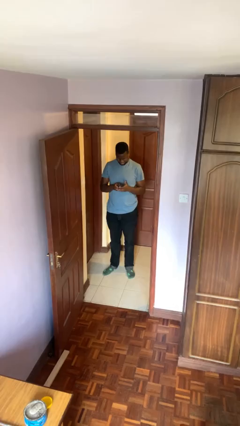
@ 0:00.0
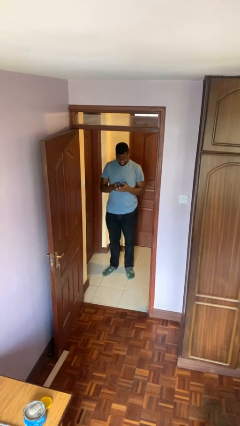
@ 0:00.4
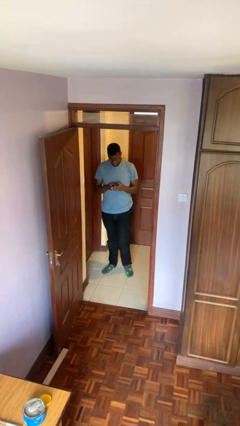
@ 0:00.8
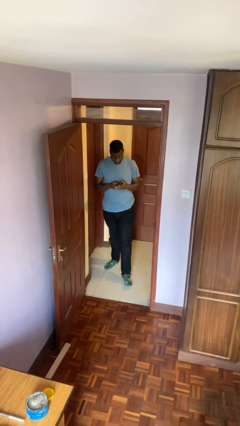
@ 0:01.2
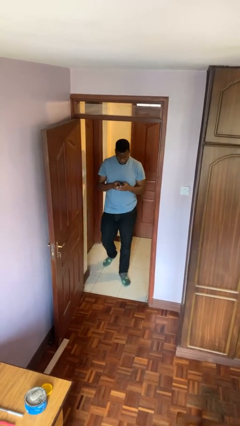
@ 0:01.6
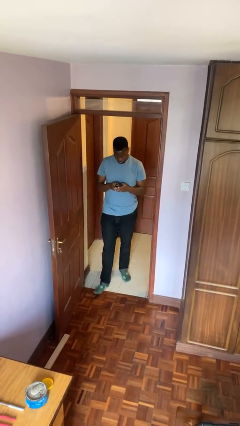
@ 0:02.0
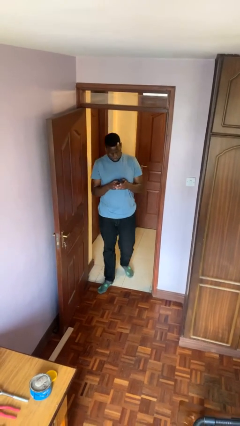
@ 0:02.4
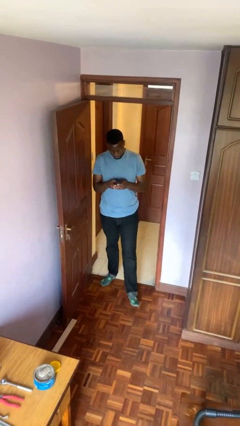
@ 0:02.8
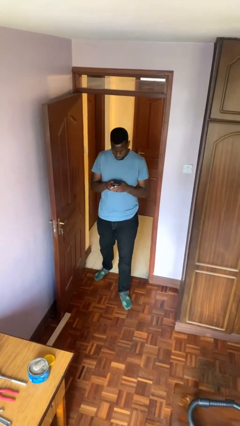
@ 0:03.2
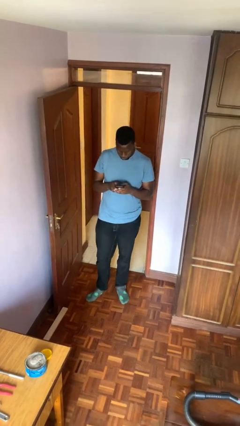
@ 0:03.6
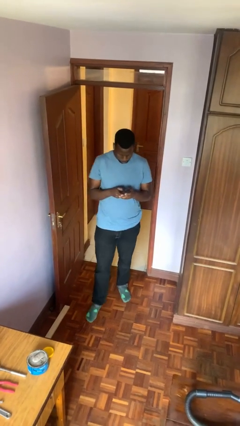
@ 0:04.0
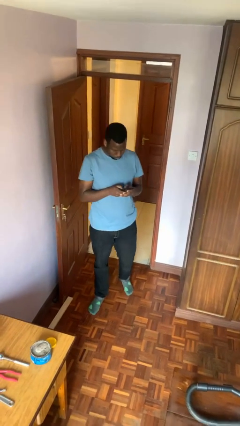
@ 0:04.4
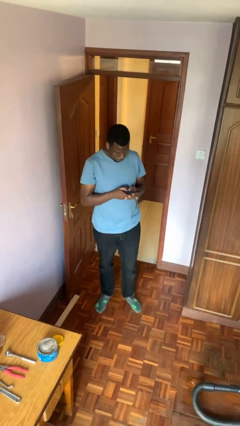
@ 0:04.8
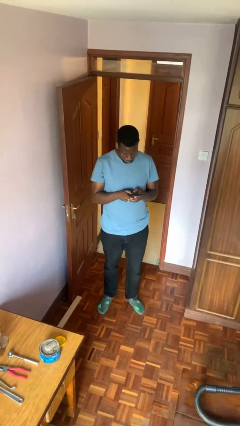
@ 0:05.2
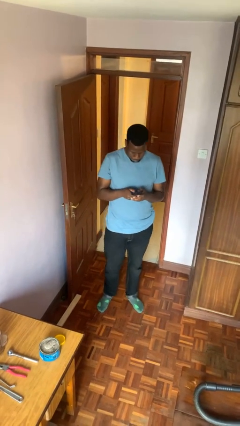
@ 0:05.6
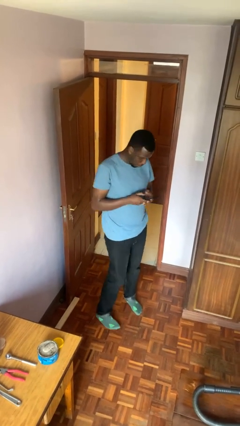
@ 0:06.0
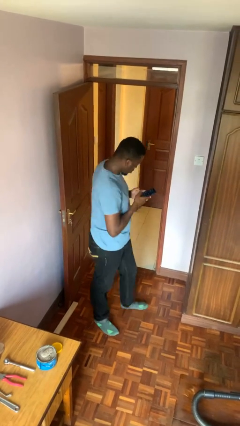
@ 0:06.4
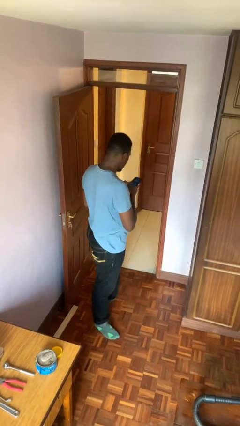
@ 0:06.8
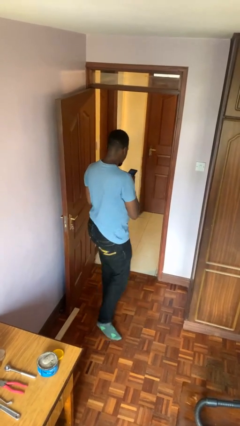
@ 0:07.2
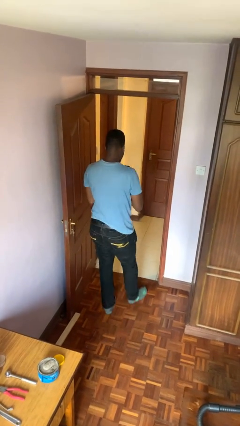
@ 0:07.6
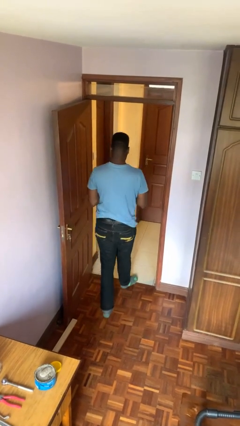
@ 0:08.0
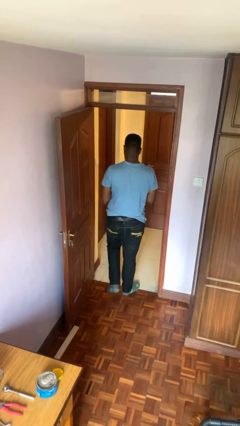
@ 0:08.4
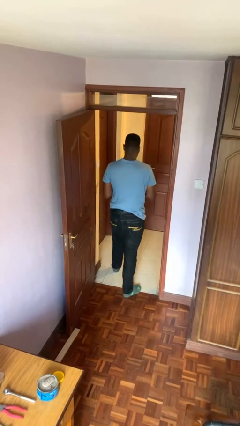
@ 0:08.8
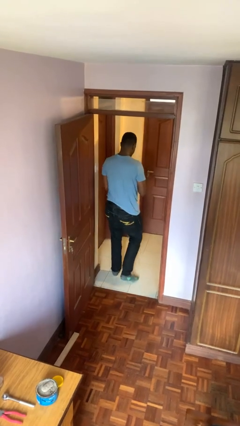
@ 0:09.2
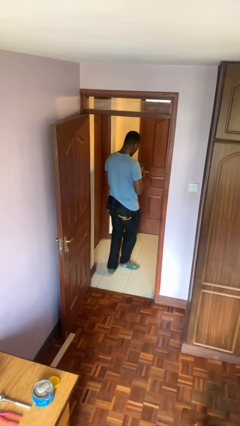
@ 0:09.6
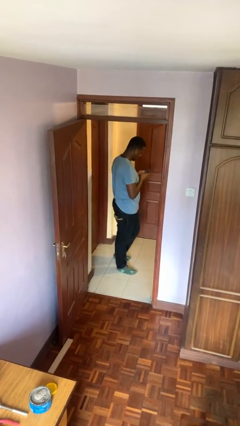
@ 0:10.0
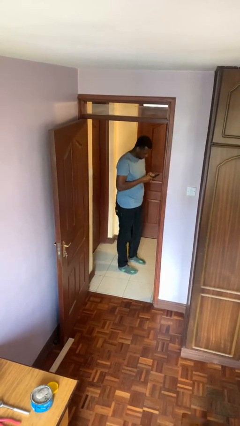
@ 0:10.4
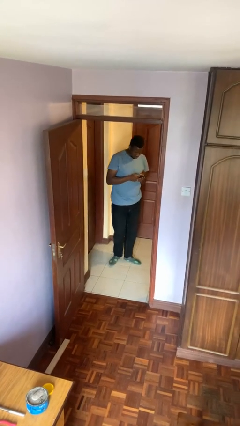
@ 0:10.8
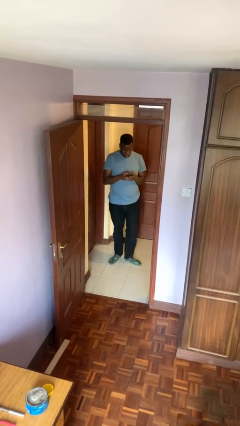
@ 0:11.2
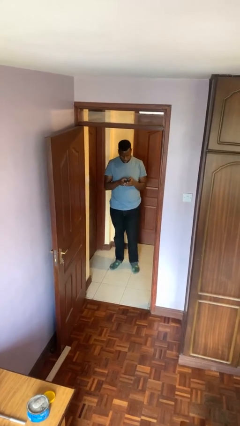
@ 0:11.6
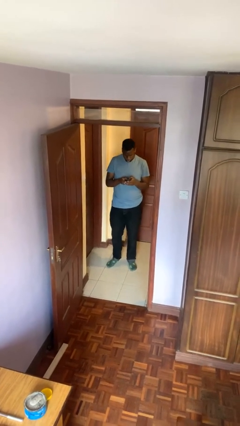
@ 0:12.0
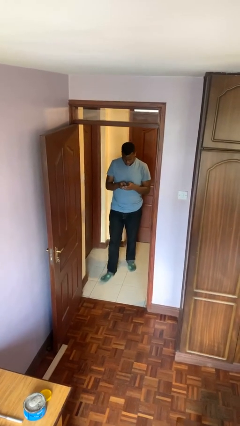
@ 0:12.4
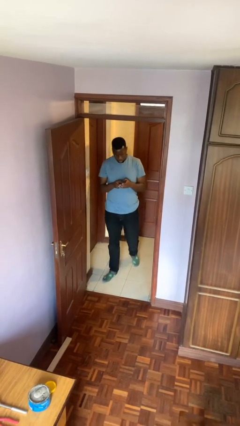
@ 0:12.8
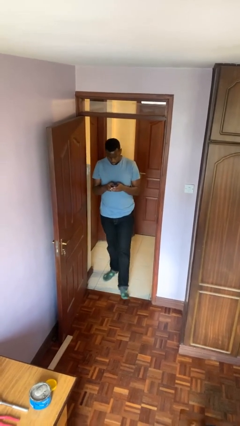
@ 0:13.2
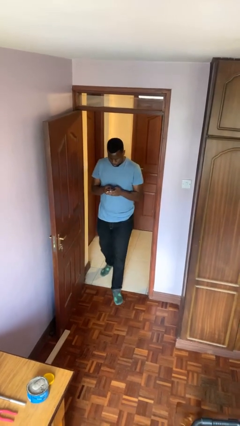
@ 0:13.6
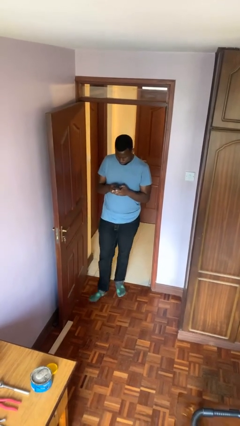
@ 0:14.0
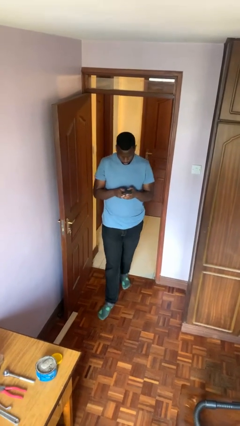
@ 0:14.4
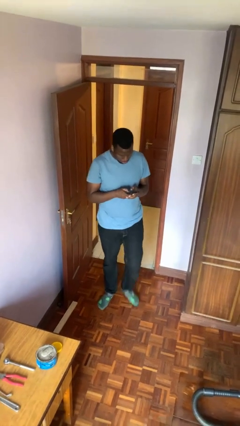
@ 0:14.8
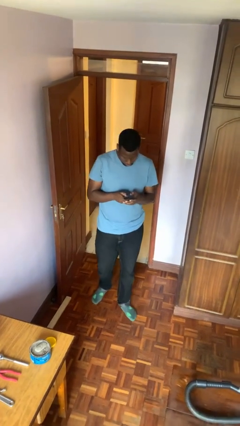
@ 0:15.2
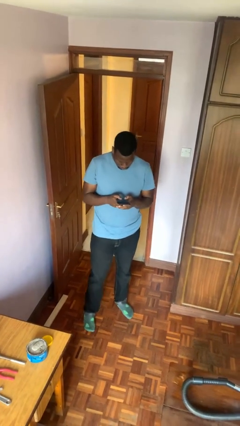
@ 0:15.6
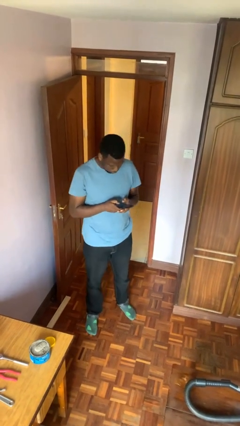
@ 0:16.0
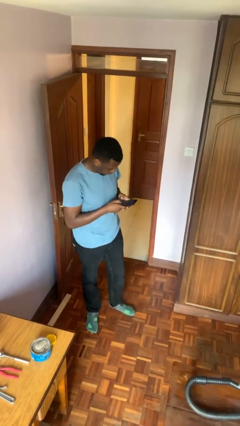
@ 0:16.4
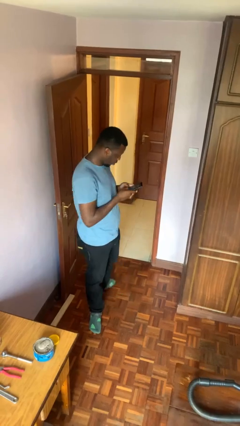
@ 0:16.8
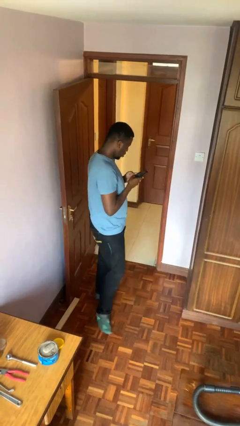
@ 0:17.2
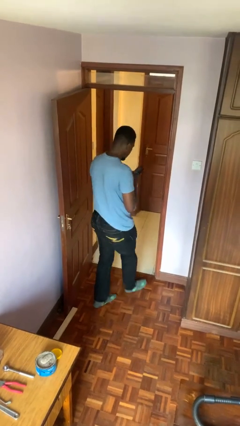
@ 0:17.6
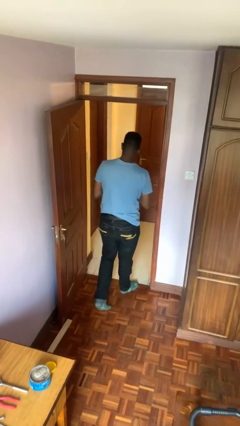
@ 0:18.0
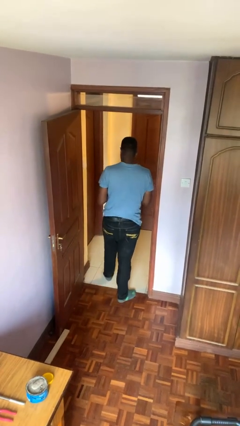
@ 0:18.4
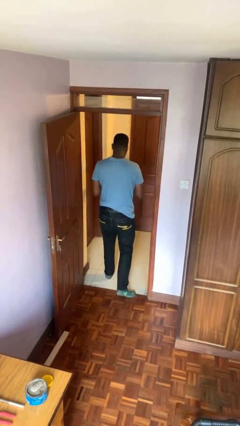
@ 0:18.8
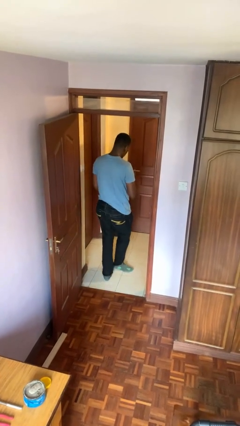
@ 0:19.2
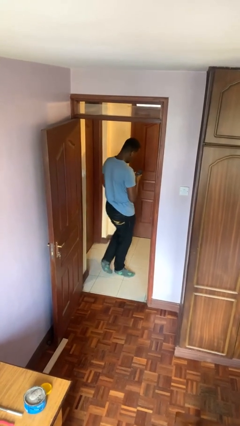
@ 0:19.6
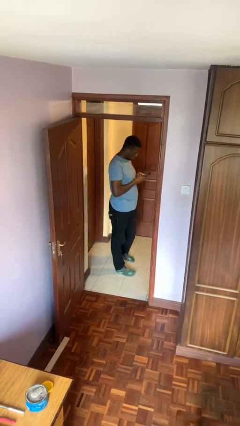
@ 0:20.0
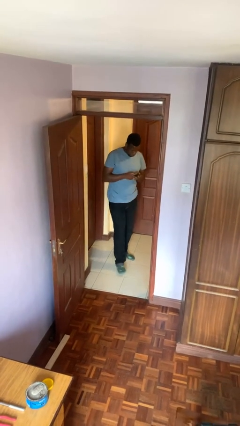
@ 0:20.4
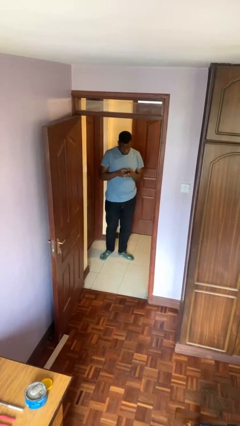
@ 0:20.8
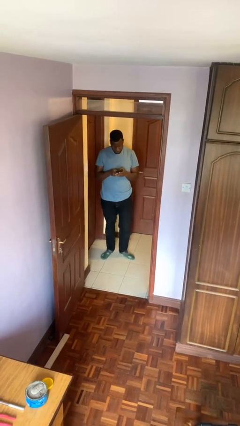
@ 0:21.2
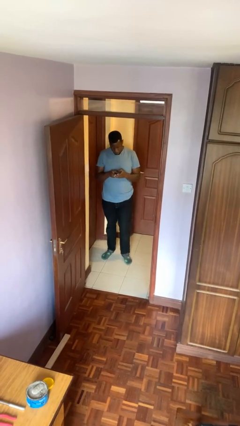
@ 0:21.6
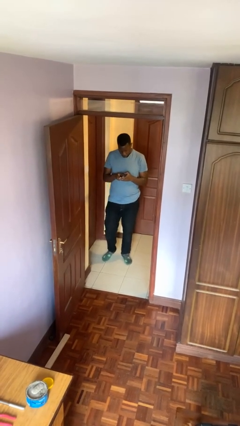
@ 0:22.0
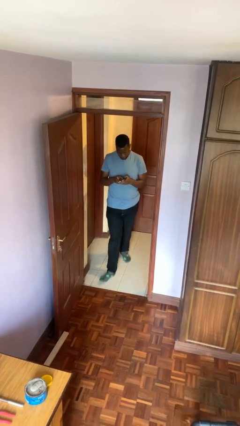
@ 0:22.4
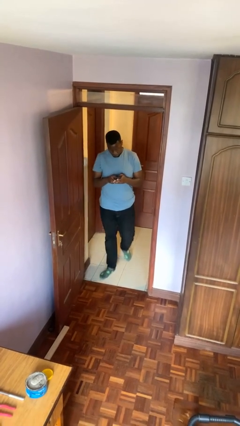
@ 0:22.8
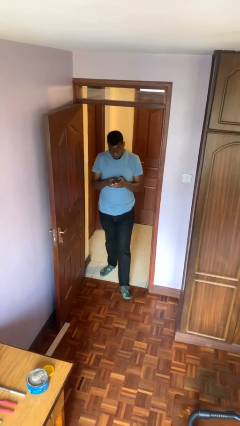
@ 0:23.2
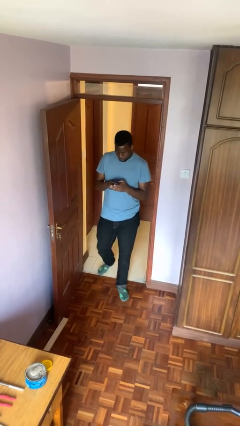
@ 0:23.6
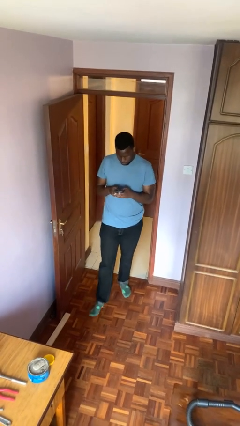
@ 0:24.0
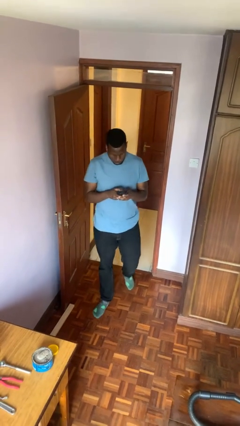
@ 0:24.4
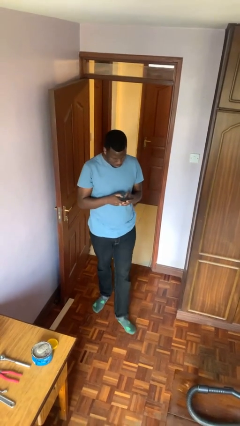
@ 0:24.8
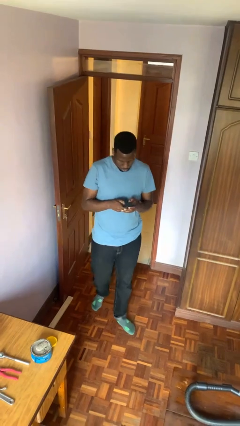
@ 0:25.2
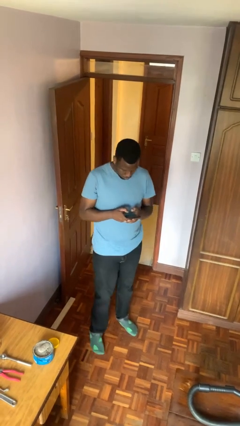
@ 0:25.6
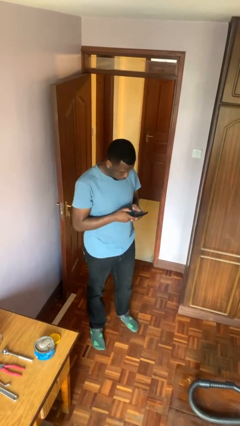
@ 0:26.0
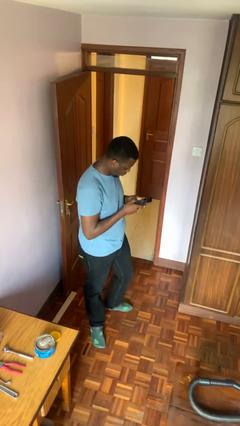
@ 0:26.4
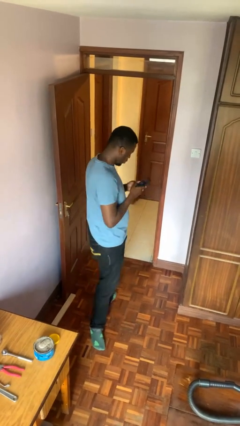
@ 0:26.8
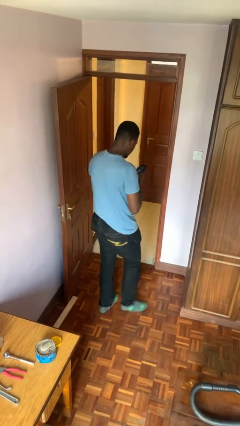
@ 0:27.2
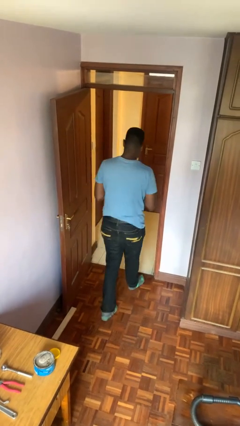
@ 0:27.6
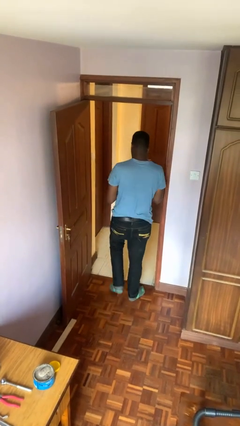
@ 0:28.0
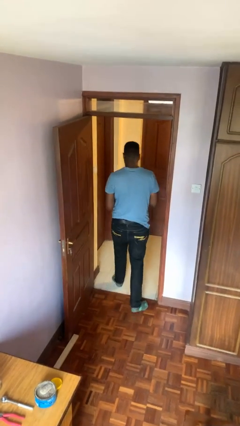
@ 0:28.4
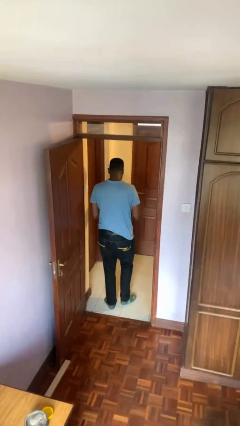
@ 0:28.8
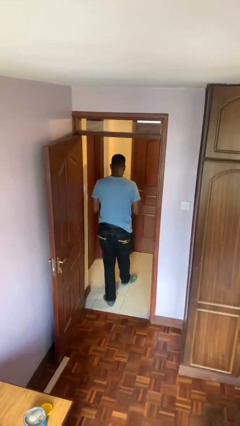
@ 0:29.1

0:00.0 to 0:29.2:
person texts on phone

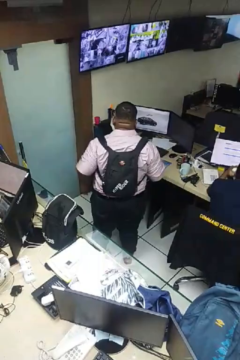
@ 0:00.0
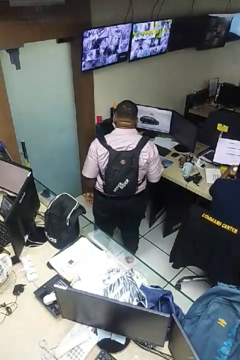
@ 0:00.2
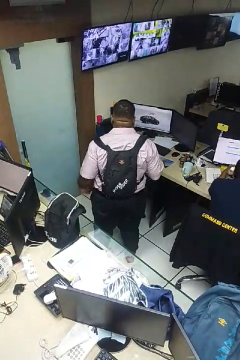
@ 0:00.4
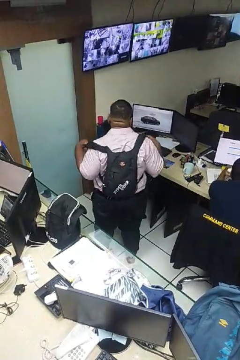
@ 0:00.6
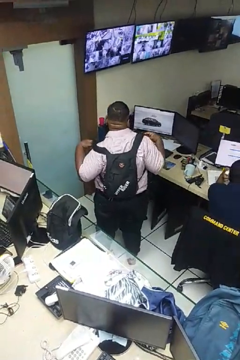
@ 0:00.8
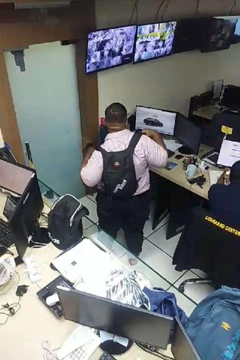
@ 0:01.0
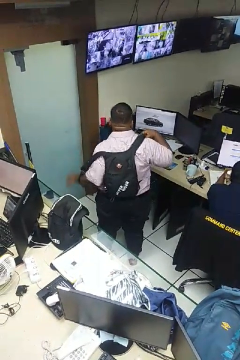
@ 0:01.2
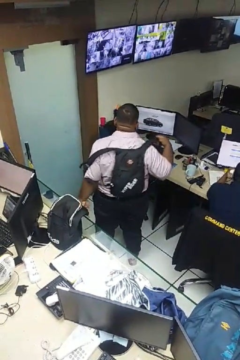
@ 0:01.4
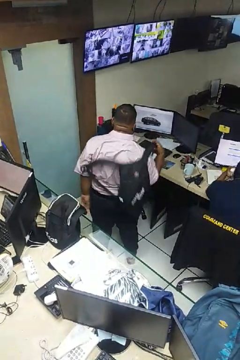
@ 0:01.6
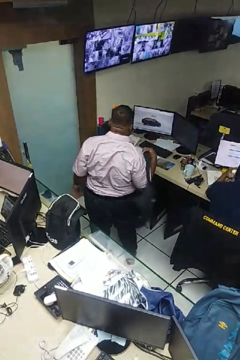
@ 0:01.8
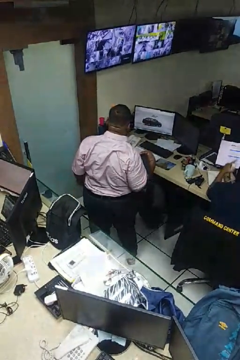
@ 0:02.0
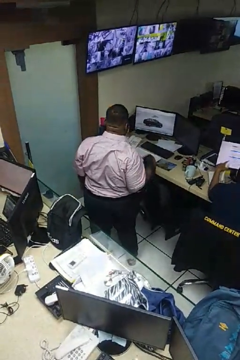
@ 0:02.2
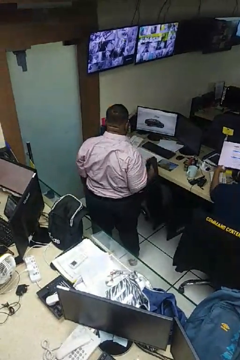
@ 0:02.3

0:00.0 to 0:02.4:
person takes off backpack

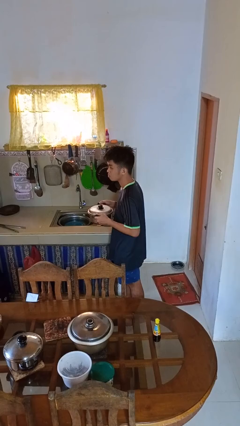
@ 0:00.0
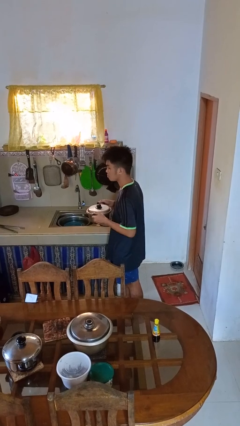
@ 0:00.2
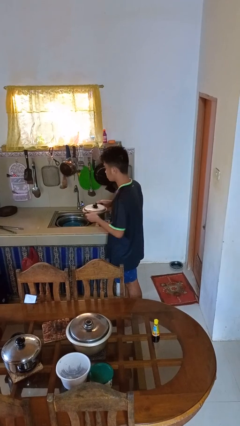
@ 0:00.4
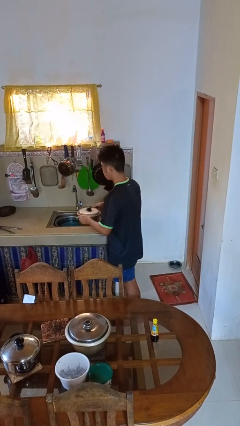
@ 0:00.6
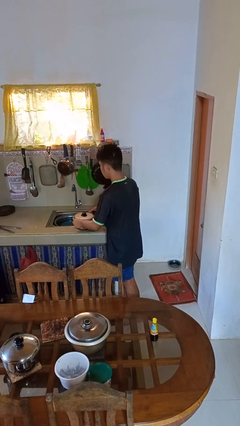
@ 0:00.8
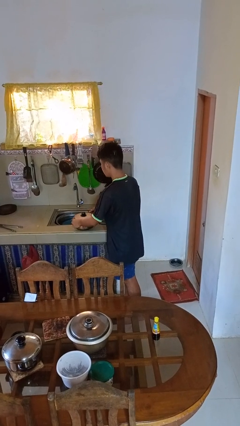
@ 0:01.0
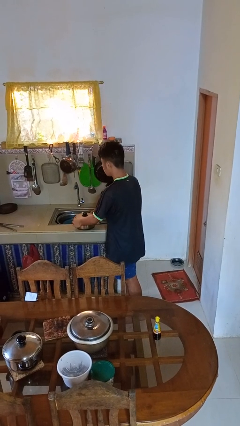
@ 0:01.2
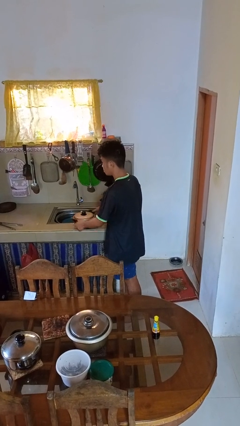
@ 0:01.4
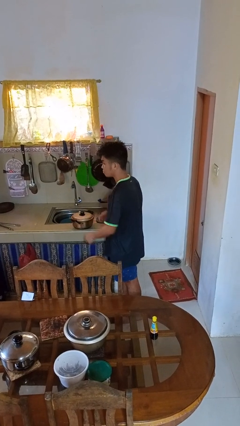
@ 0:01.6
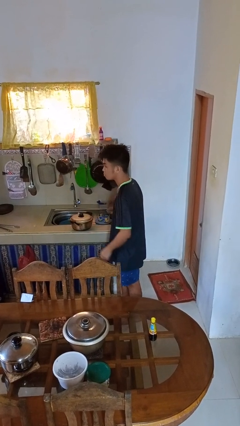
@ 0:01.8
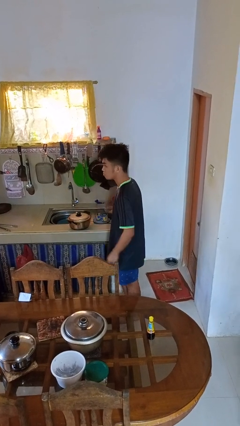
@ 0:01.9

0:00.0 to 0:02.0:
person puts down object on countertop
